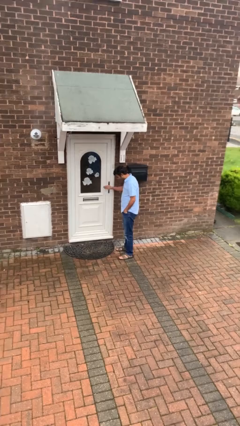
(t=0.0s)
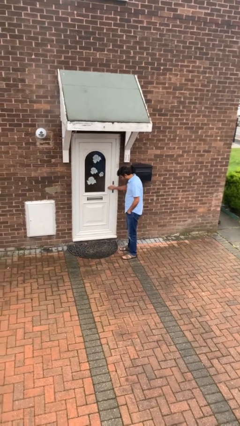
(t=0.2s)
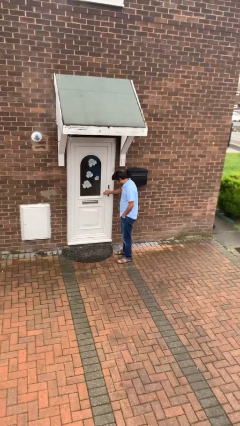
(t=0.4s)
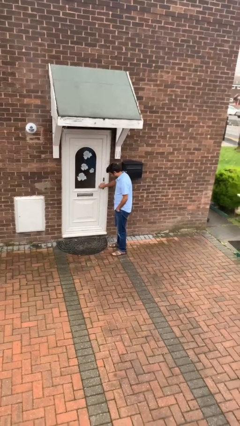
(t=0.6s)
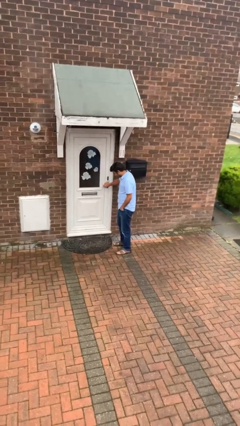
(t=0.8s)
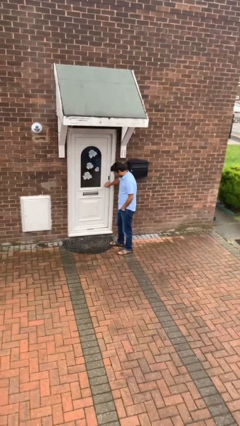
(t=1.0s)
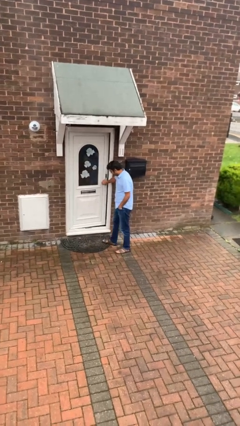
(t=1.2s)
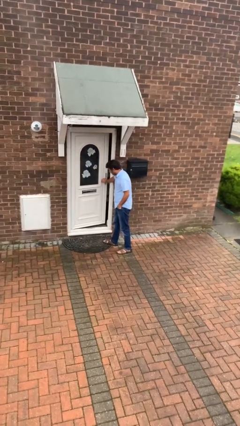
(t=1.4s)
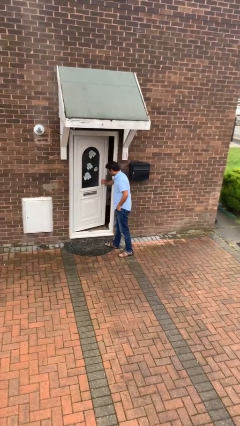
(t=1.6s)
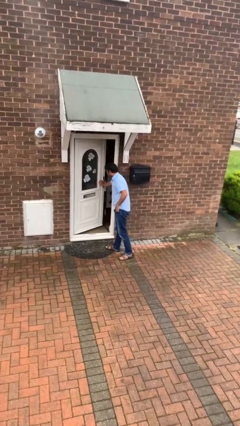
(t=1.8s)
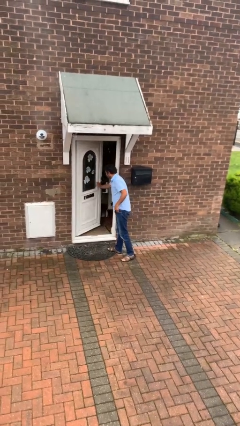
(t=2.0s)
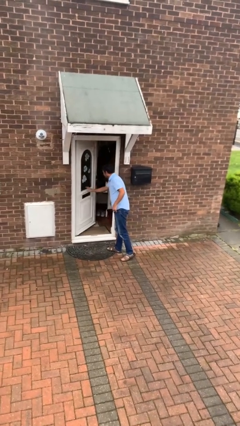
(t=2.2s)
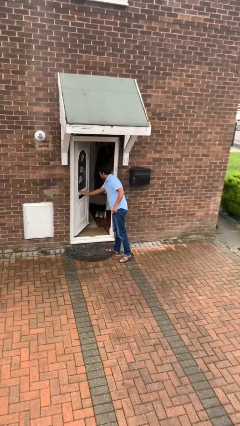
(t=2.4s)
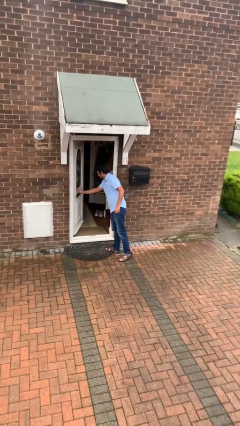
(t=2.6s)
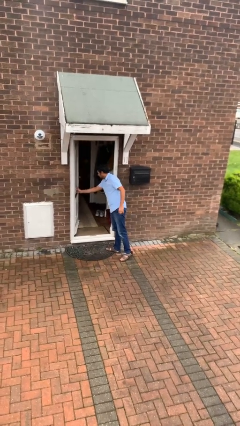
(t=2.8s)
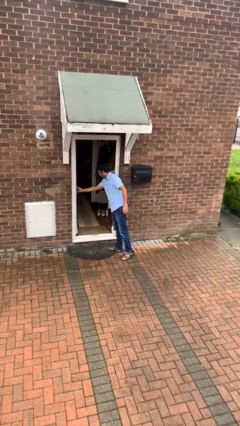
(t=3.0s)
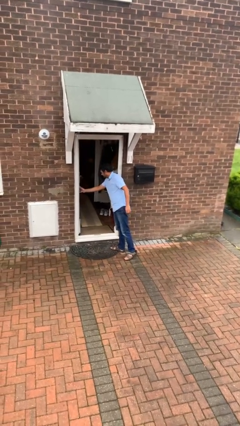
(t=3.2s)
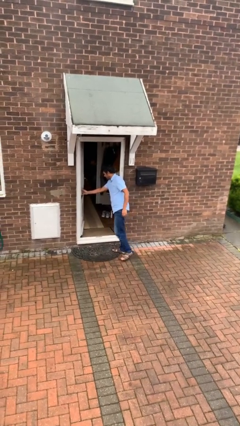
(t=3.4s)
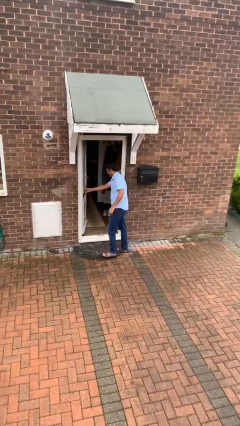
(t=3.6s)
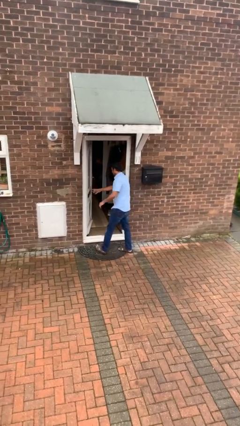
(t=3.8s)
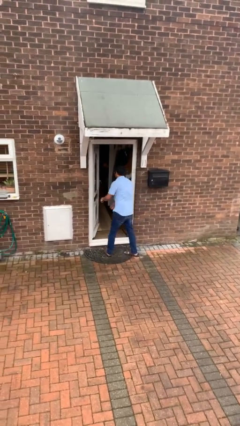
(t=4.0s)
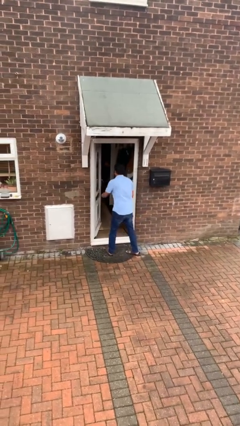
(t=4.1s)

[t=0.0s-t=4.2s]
person opens facility door

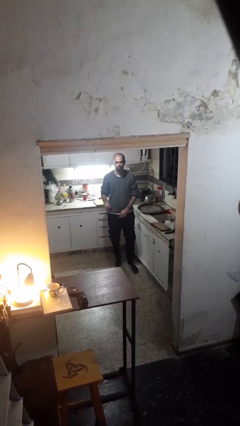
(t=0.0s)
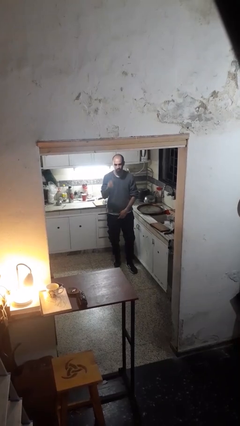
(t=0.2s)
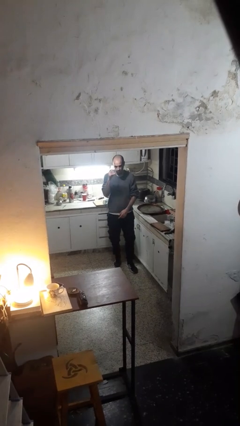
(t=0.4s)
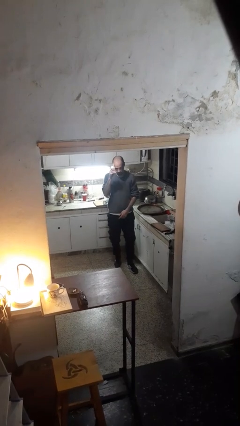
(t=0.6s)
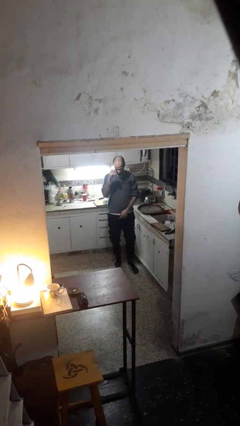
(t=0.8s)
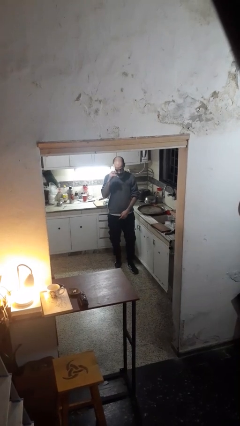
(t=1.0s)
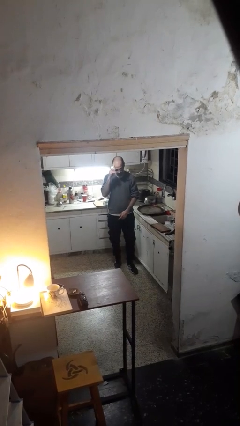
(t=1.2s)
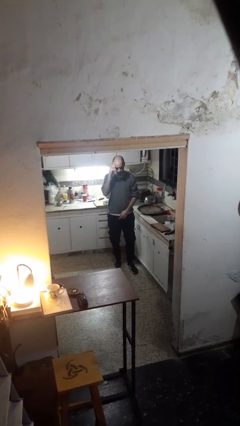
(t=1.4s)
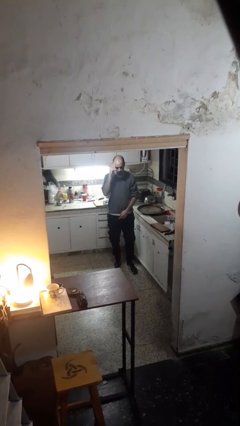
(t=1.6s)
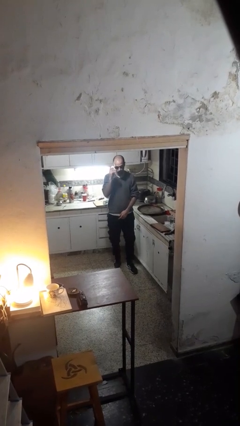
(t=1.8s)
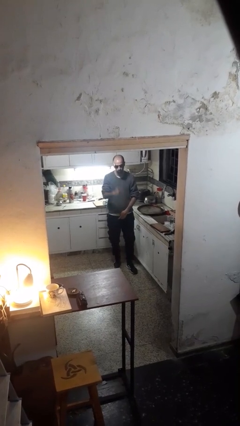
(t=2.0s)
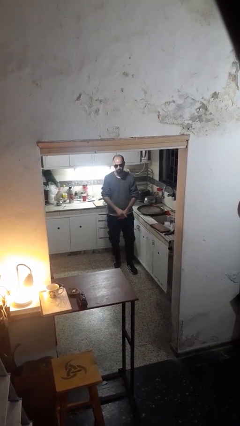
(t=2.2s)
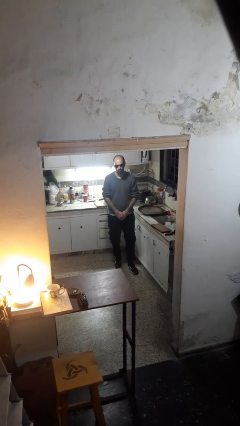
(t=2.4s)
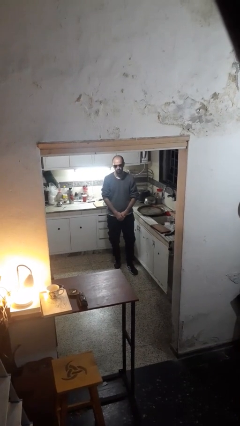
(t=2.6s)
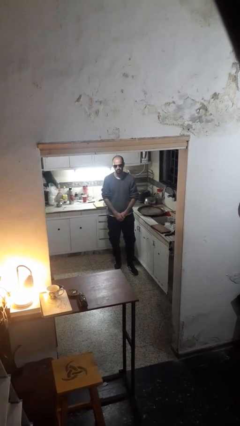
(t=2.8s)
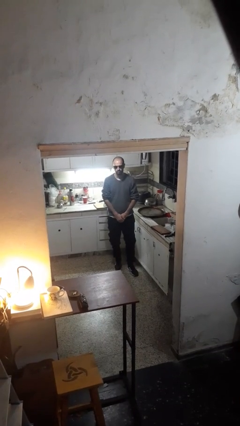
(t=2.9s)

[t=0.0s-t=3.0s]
person puts on sunglasses

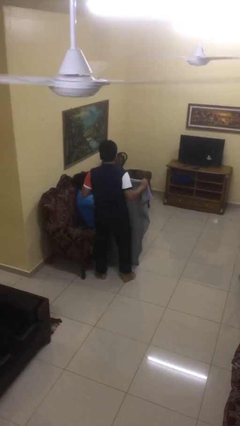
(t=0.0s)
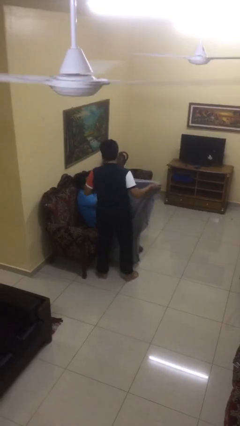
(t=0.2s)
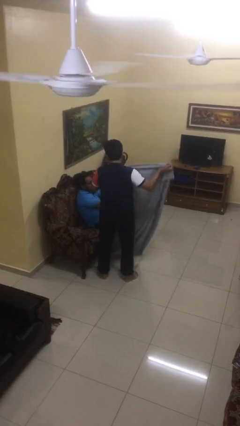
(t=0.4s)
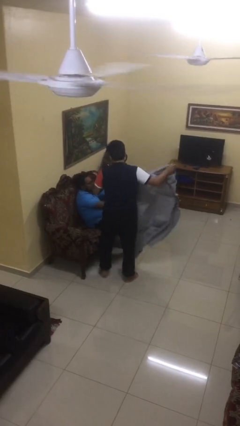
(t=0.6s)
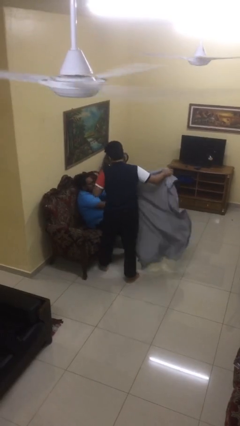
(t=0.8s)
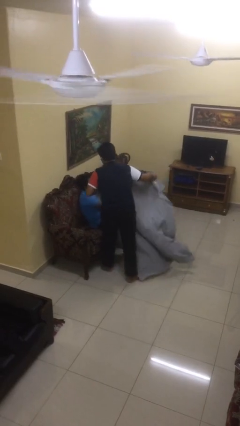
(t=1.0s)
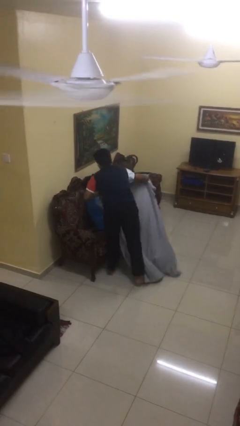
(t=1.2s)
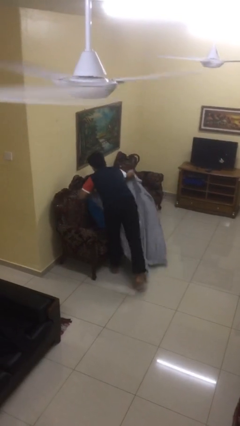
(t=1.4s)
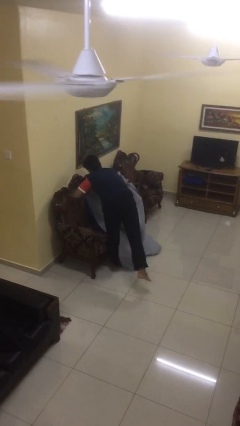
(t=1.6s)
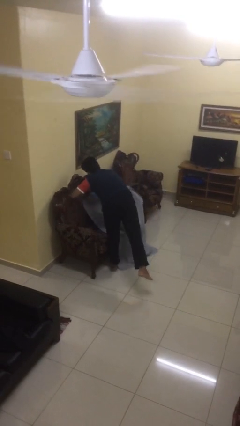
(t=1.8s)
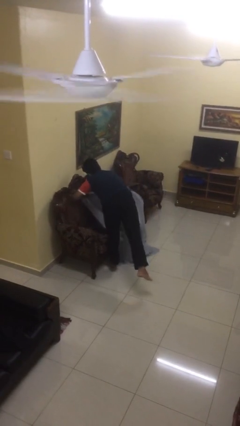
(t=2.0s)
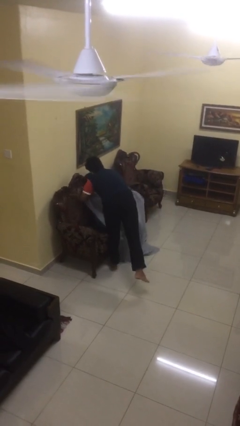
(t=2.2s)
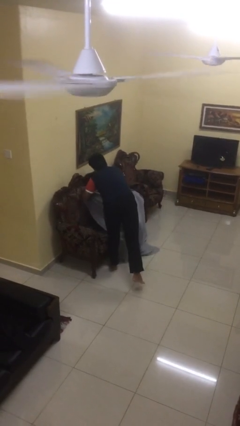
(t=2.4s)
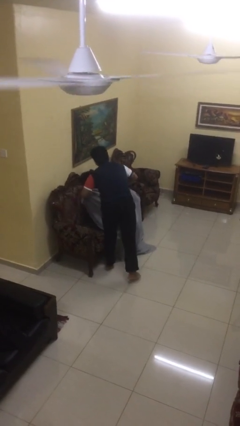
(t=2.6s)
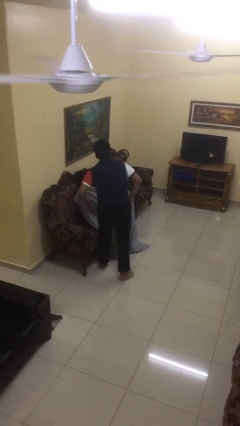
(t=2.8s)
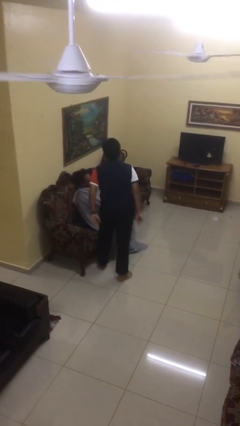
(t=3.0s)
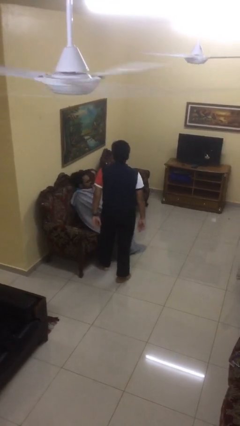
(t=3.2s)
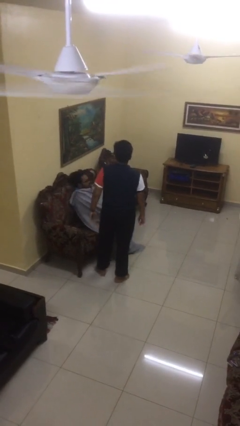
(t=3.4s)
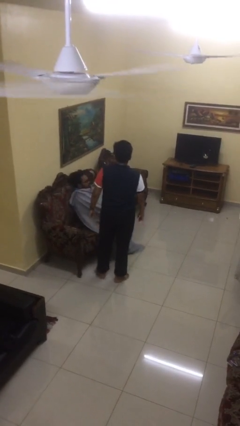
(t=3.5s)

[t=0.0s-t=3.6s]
person covers friend with blanket

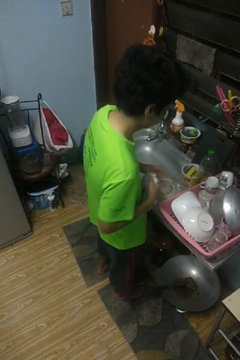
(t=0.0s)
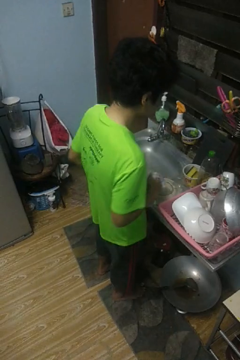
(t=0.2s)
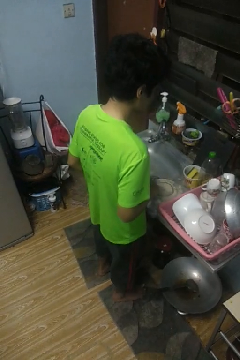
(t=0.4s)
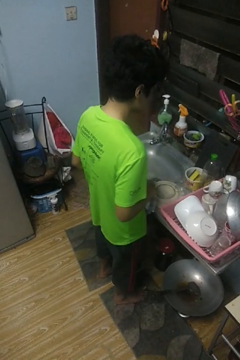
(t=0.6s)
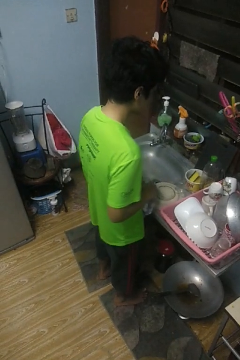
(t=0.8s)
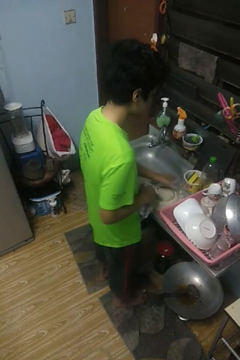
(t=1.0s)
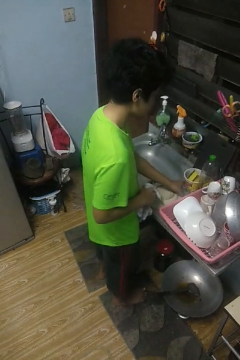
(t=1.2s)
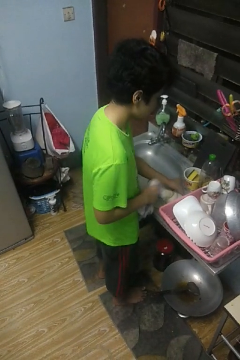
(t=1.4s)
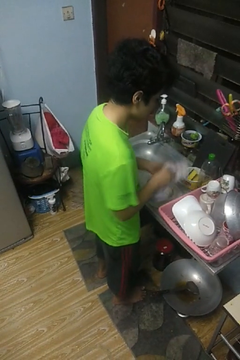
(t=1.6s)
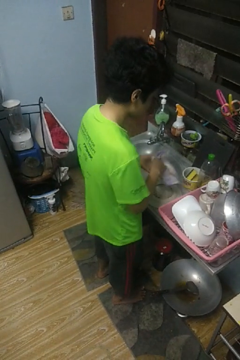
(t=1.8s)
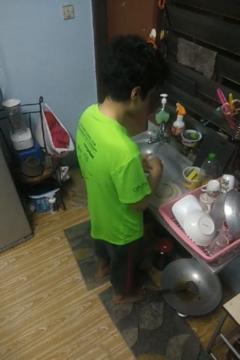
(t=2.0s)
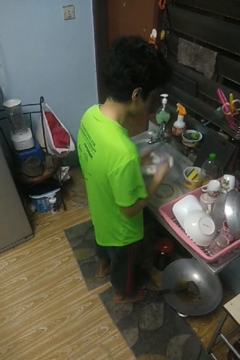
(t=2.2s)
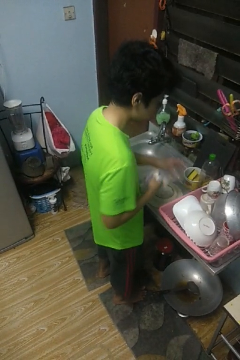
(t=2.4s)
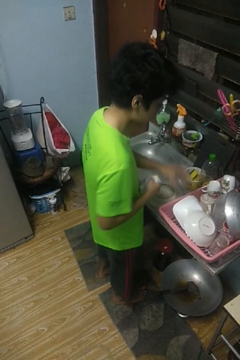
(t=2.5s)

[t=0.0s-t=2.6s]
person dries dish

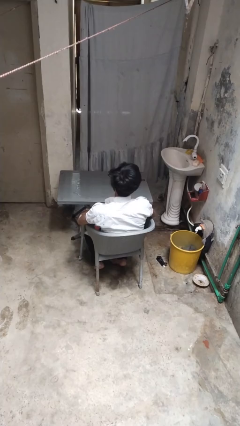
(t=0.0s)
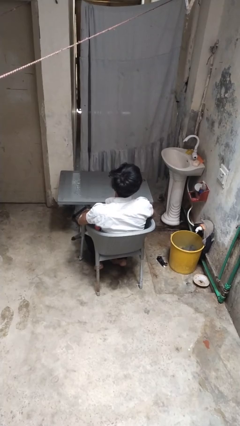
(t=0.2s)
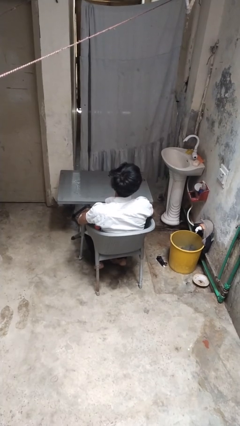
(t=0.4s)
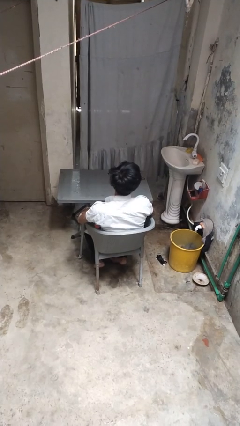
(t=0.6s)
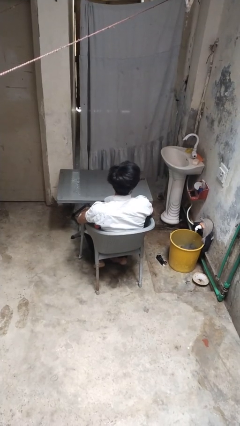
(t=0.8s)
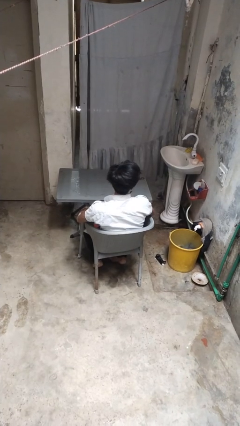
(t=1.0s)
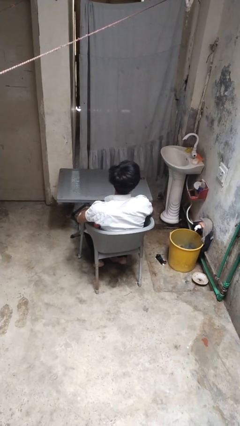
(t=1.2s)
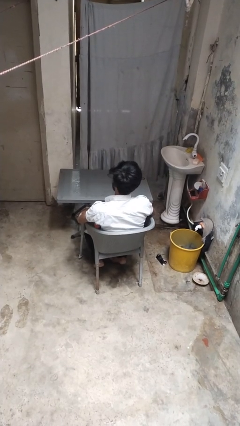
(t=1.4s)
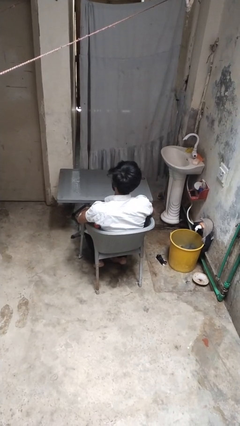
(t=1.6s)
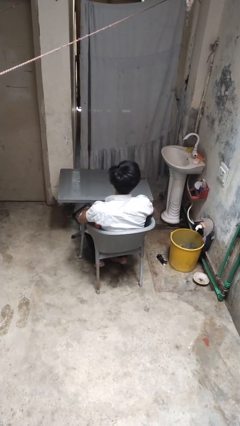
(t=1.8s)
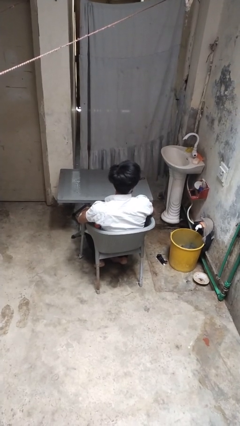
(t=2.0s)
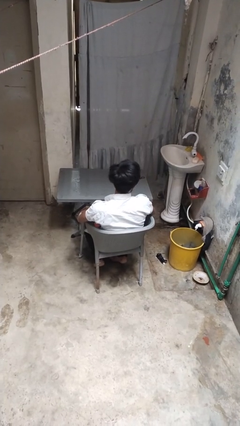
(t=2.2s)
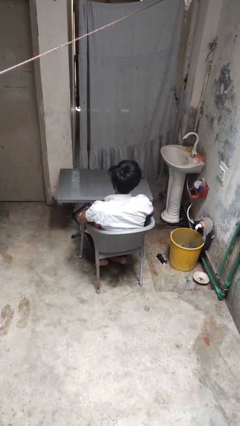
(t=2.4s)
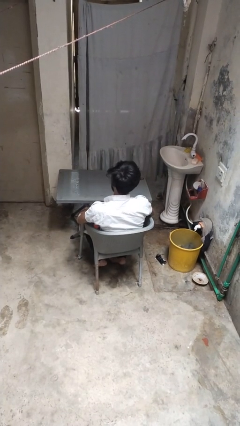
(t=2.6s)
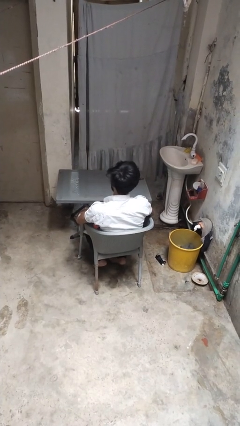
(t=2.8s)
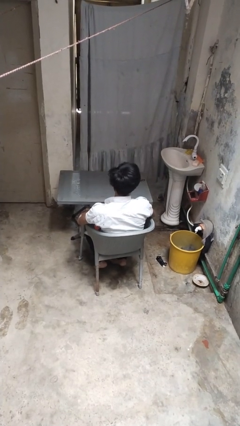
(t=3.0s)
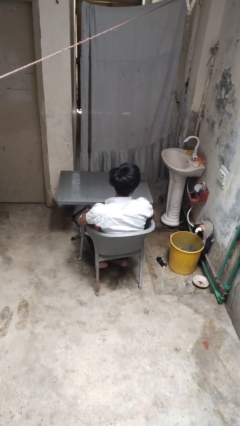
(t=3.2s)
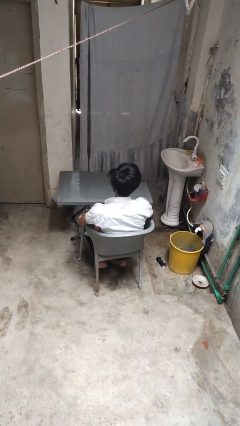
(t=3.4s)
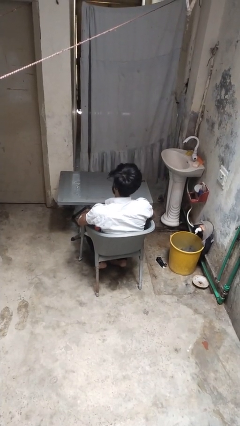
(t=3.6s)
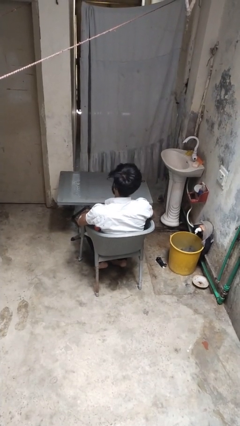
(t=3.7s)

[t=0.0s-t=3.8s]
person shakes head

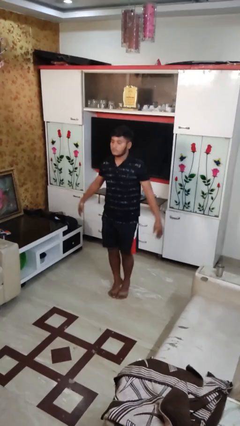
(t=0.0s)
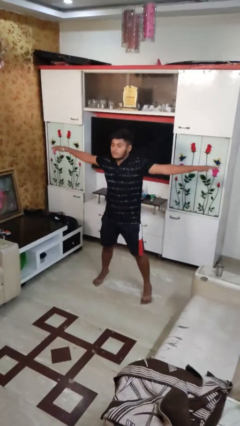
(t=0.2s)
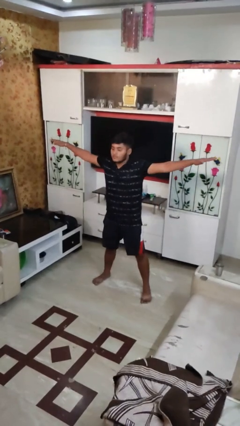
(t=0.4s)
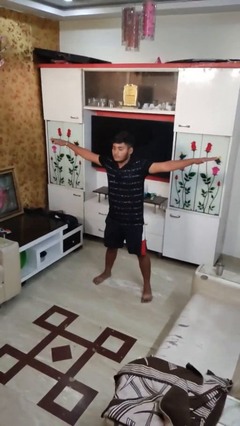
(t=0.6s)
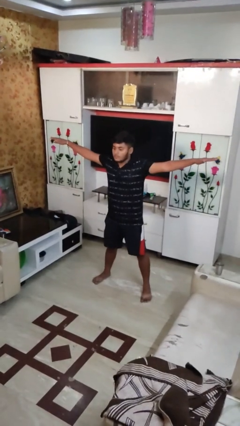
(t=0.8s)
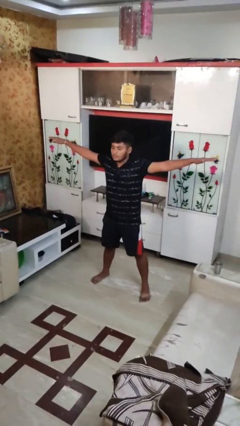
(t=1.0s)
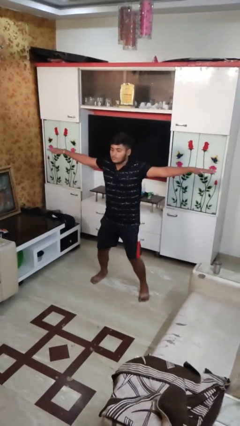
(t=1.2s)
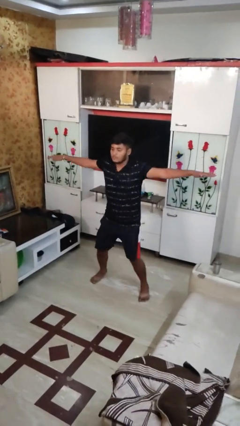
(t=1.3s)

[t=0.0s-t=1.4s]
person exercises with jumping jacks
